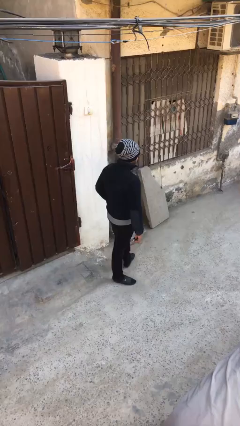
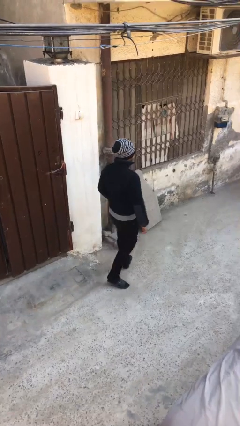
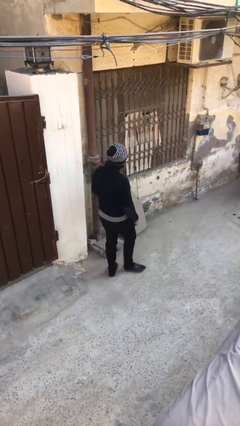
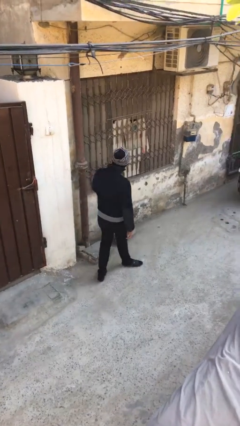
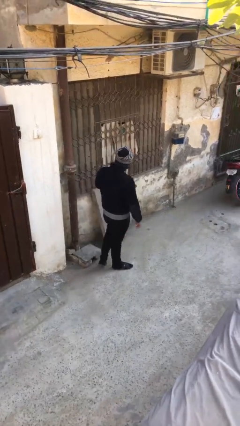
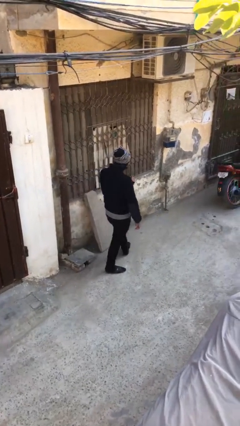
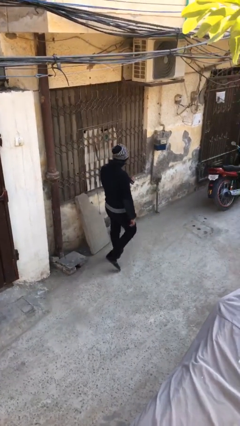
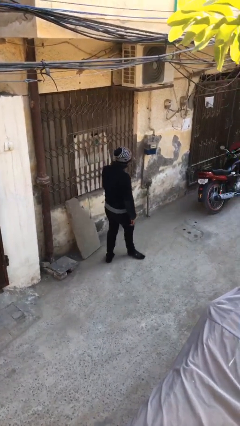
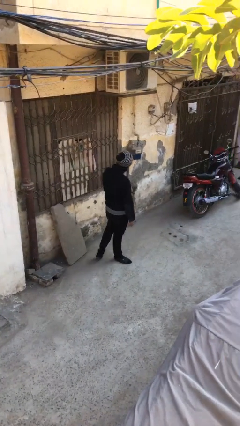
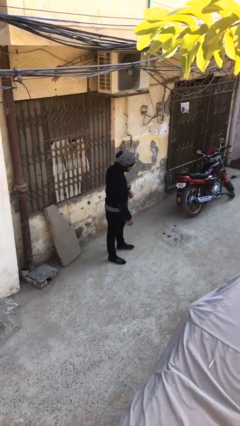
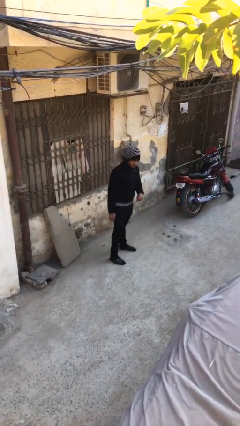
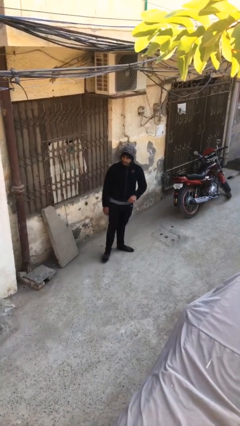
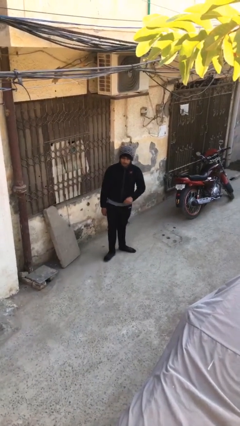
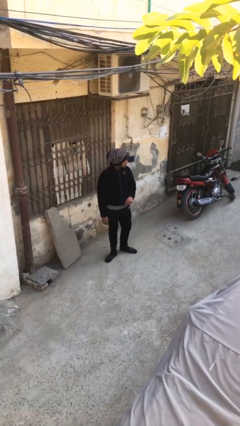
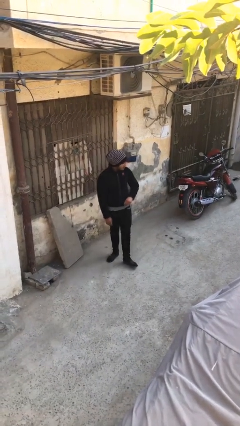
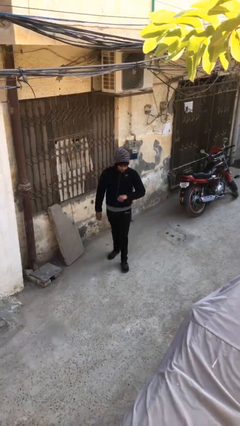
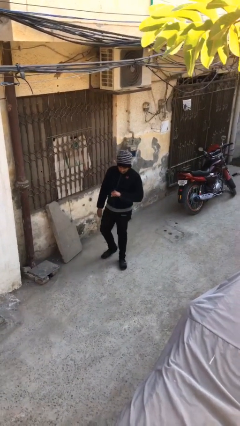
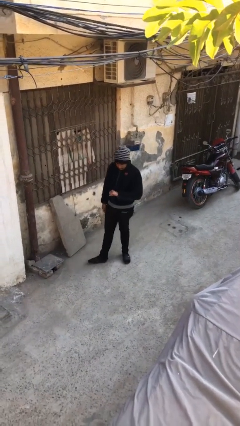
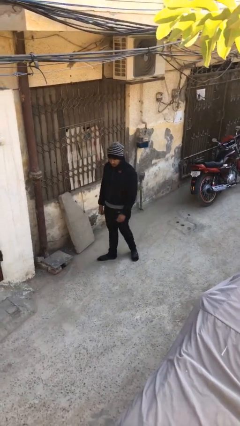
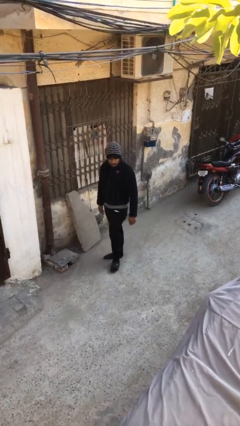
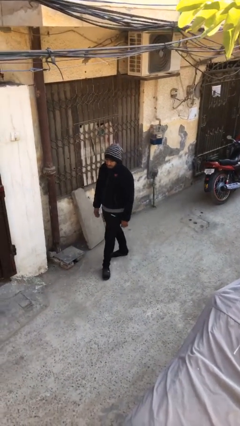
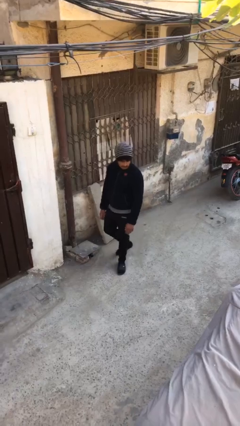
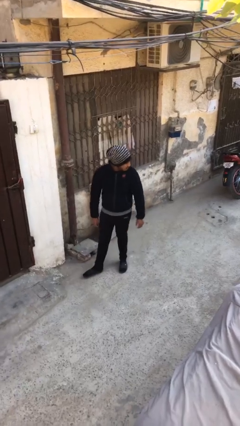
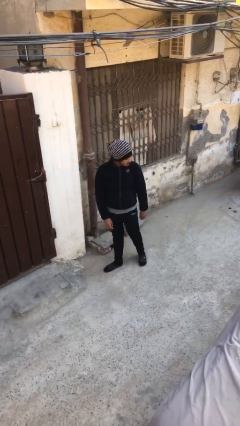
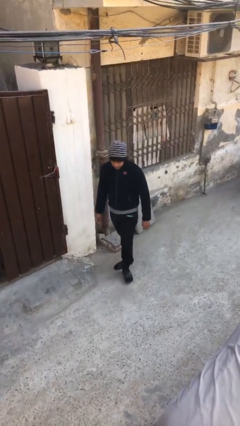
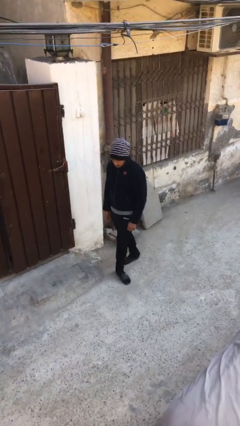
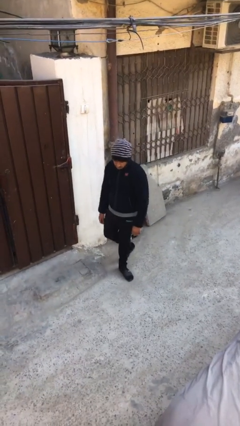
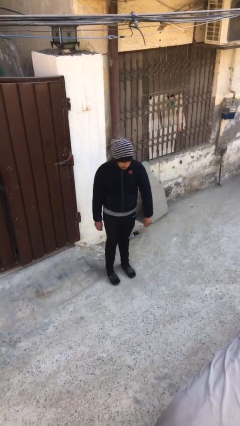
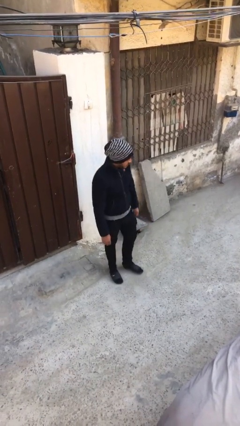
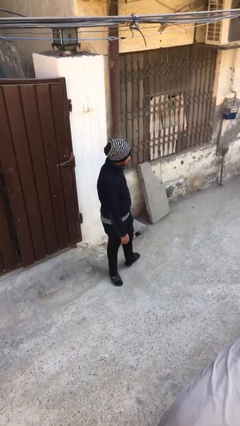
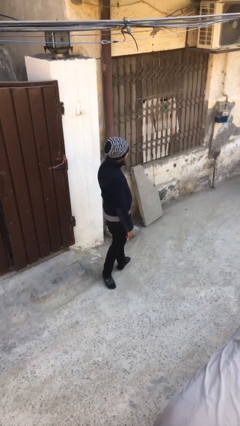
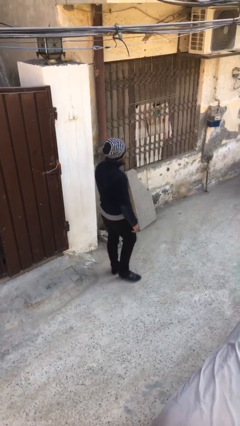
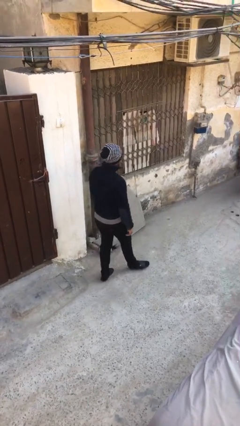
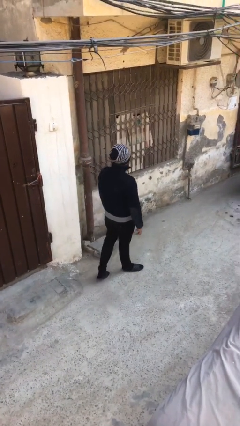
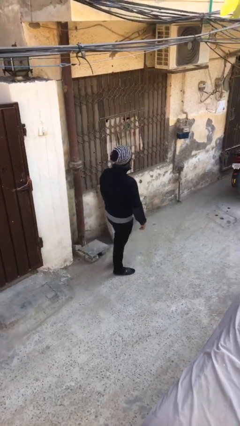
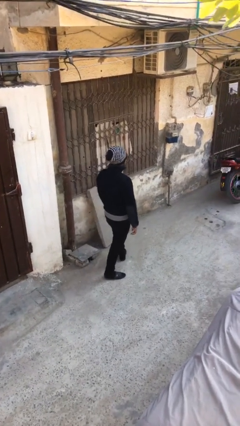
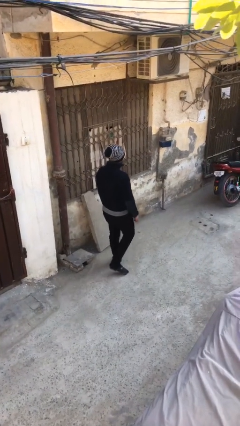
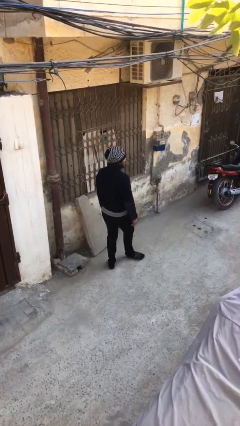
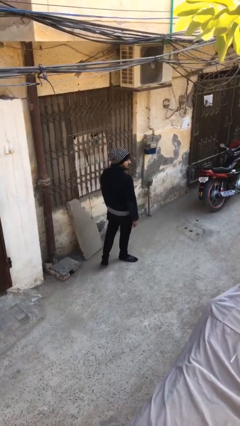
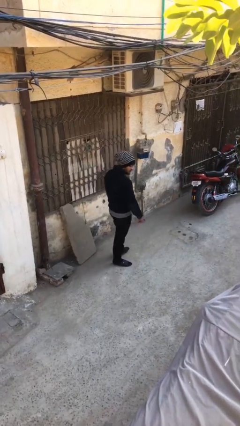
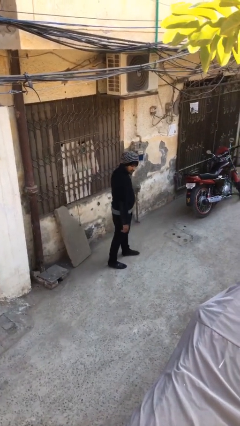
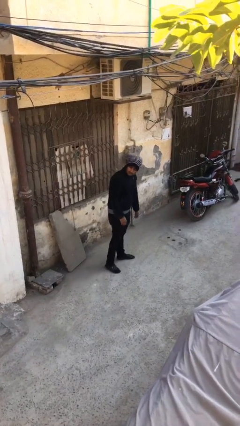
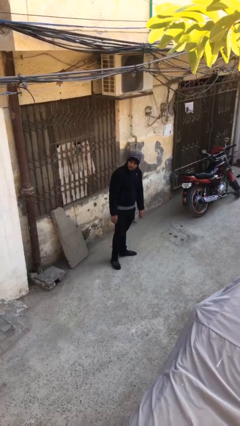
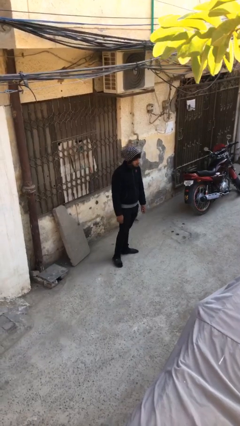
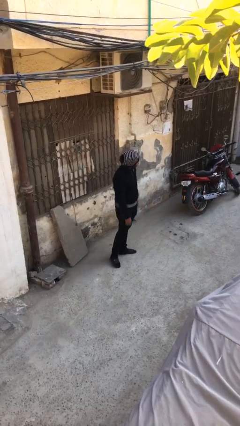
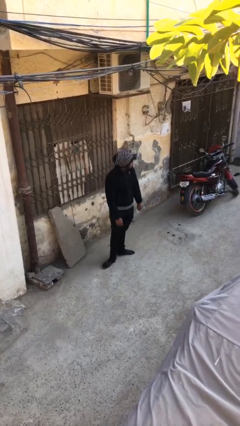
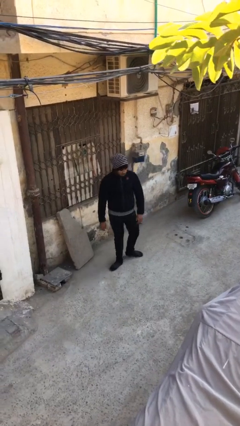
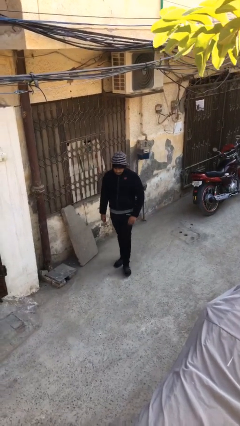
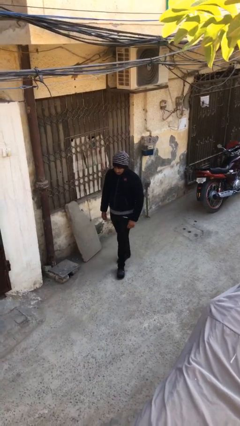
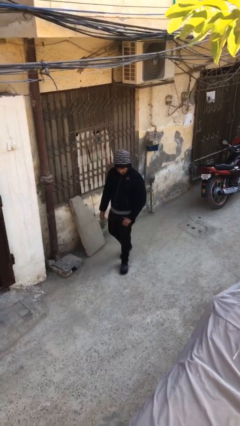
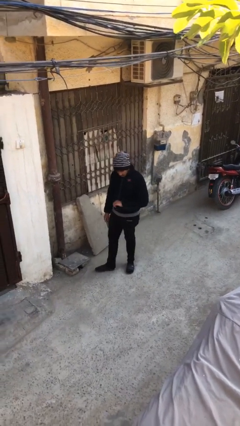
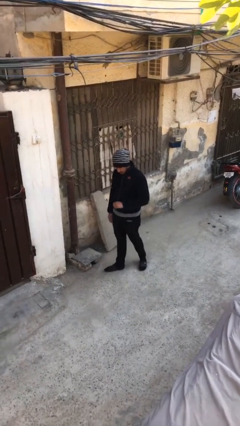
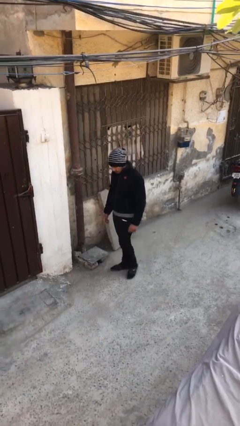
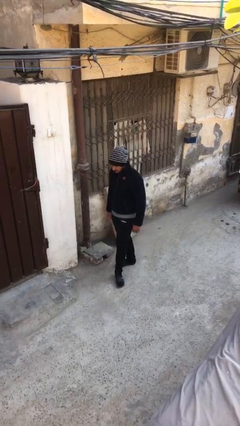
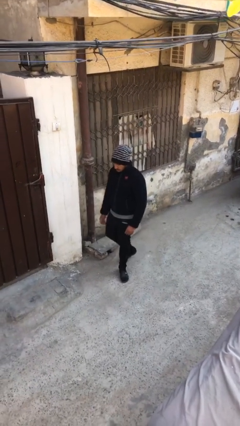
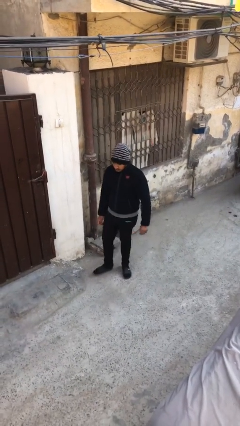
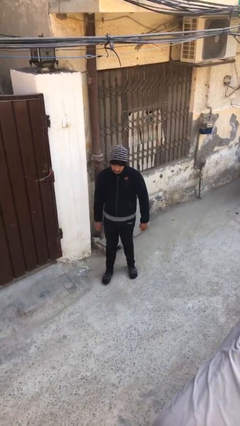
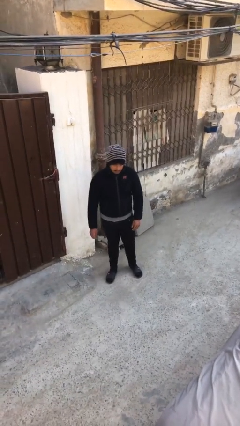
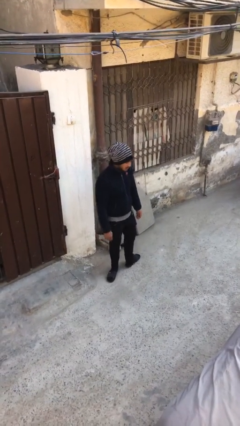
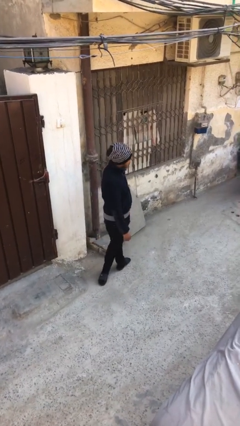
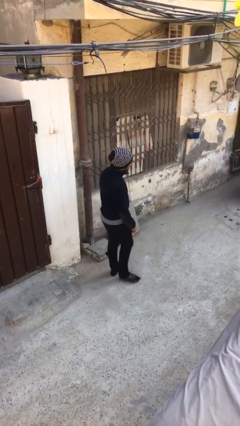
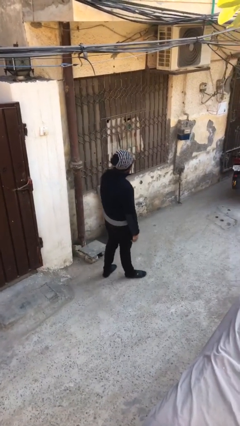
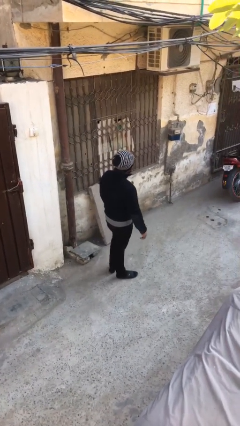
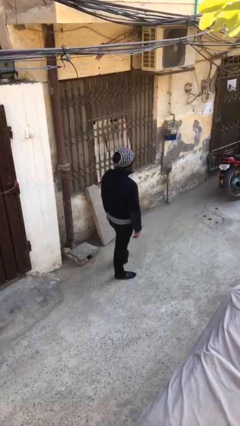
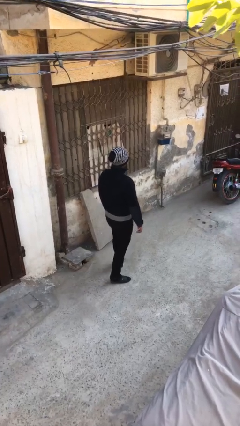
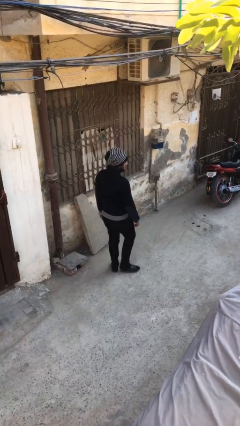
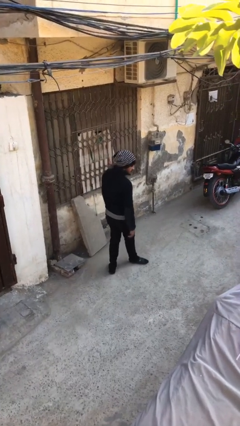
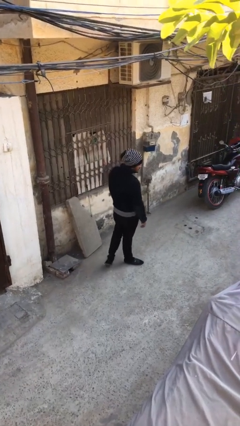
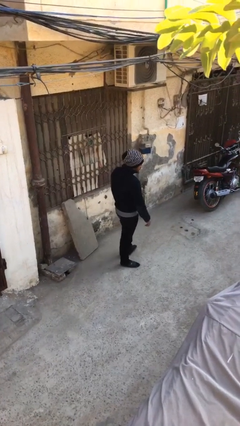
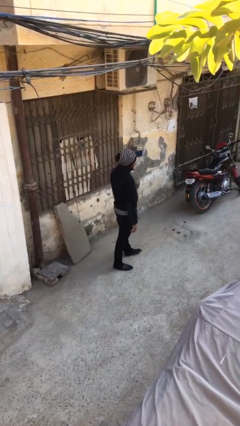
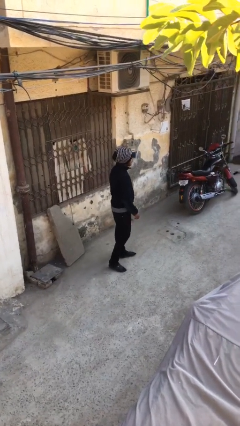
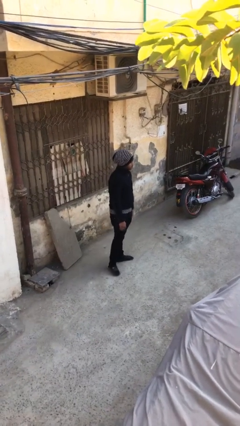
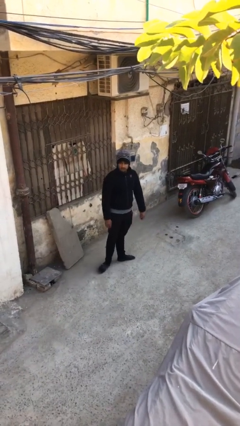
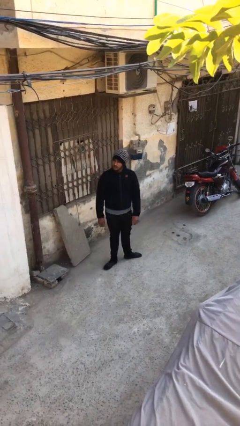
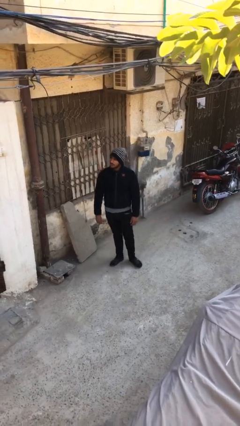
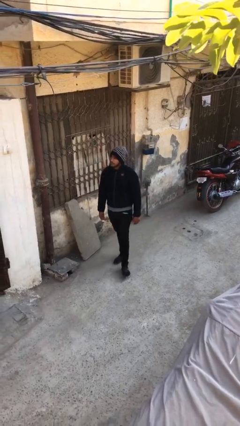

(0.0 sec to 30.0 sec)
person walks

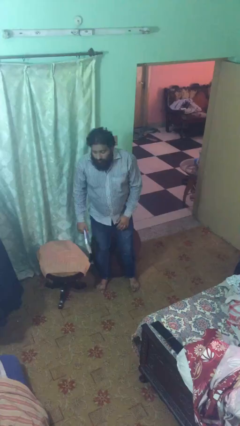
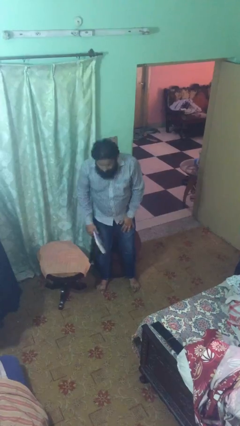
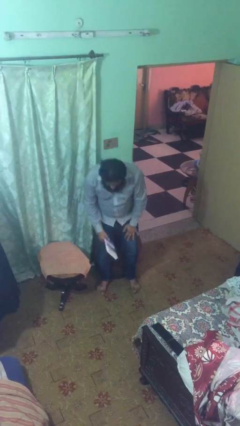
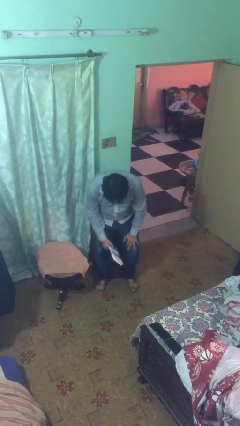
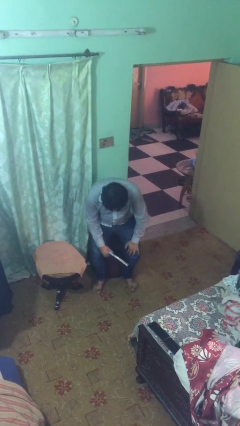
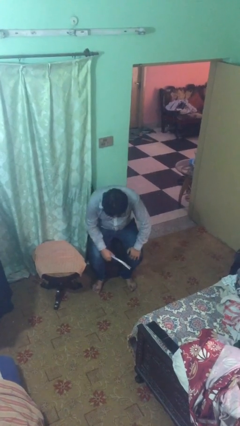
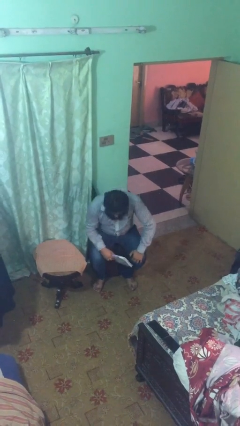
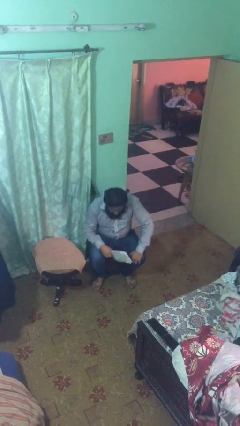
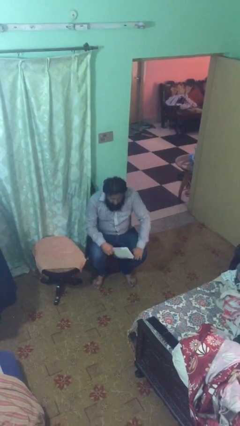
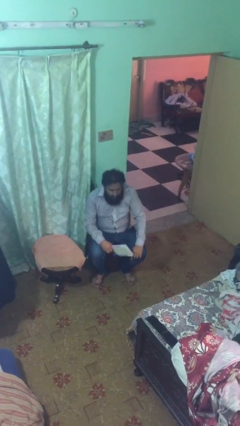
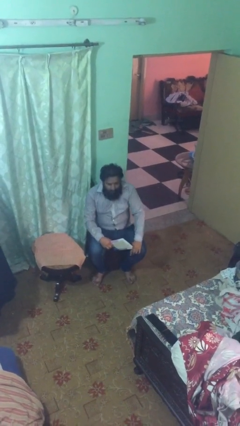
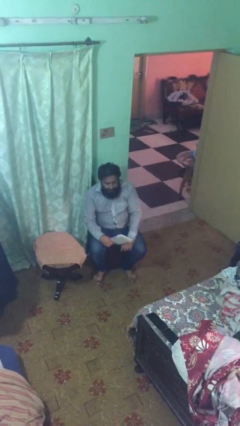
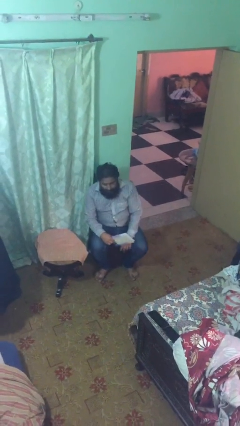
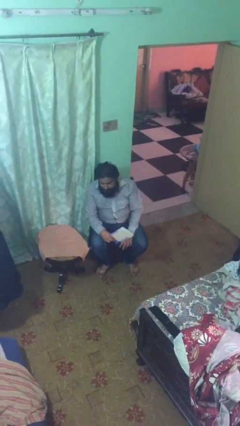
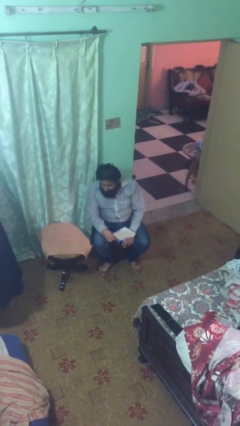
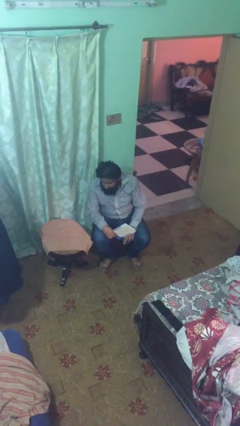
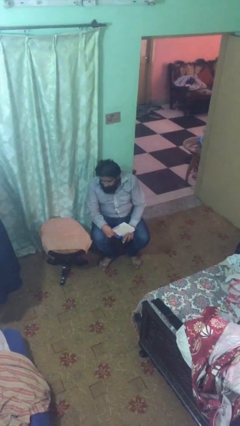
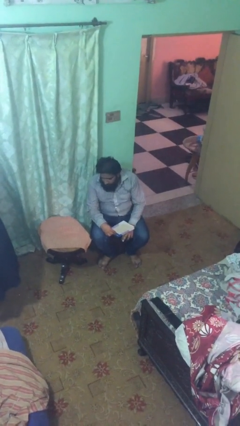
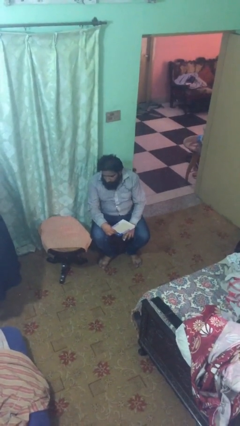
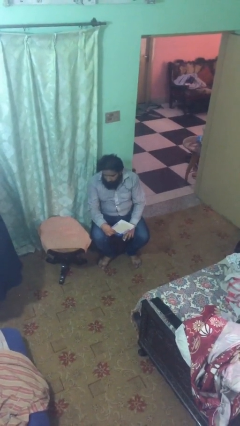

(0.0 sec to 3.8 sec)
person sits down
